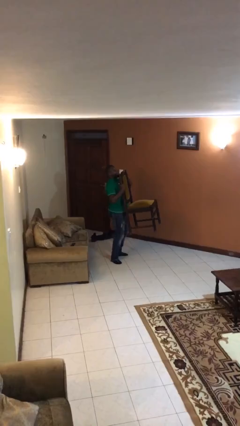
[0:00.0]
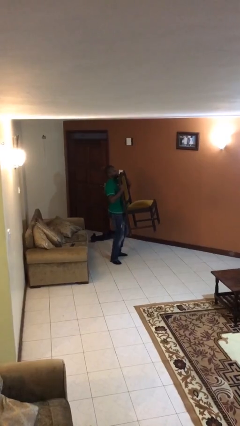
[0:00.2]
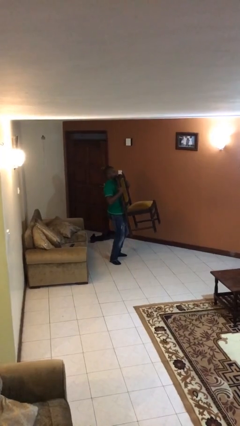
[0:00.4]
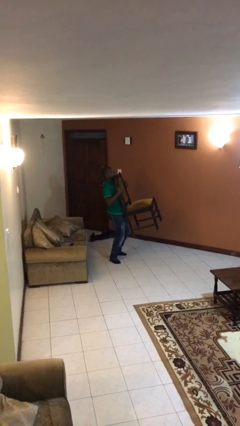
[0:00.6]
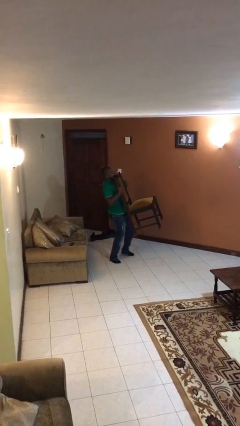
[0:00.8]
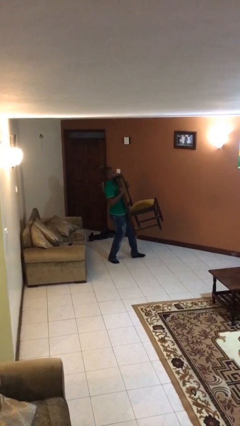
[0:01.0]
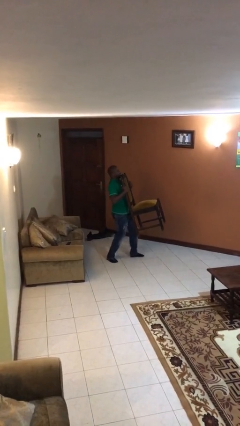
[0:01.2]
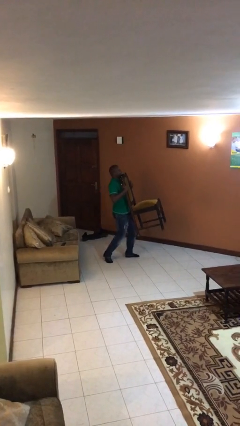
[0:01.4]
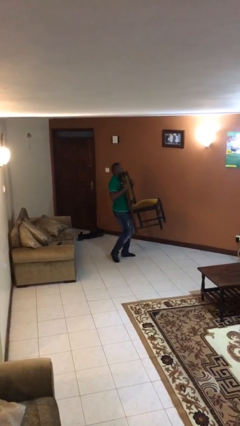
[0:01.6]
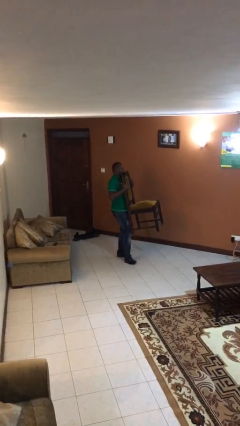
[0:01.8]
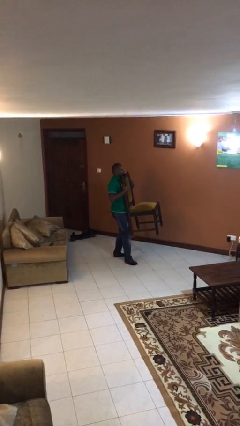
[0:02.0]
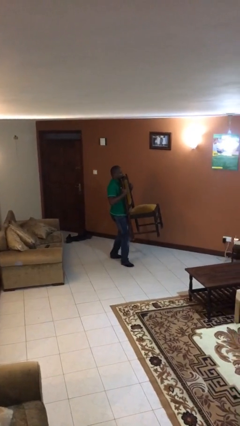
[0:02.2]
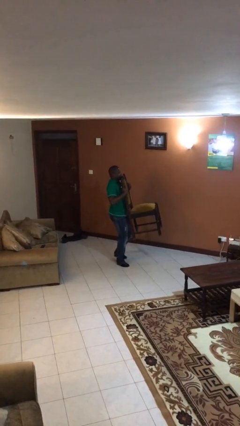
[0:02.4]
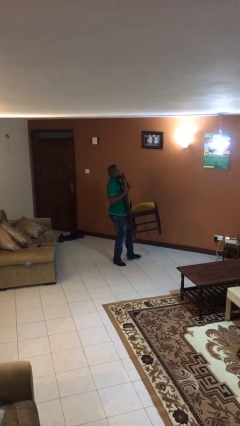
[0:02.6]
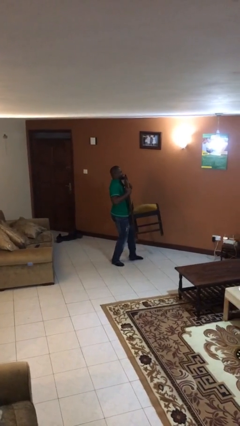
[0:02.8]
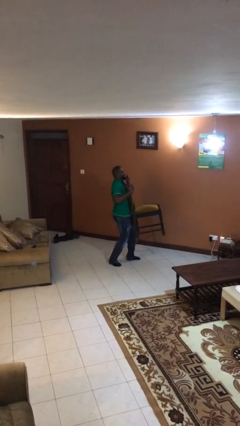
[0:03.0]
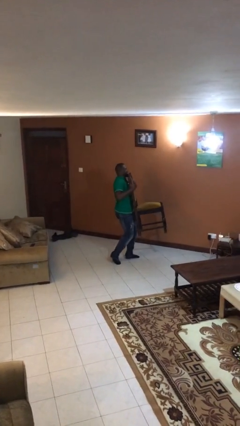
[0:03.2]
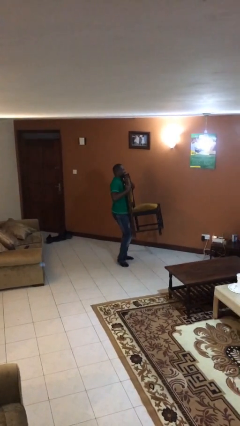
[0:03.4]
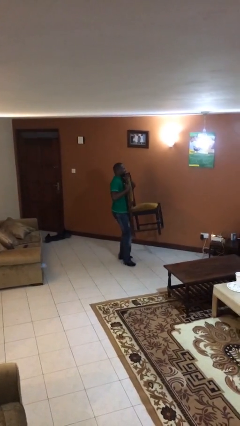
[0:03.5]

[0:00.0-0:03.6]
person carries heavy object

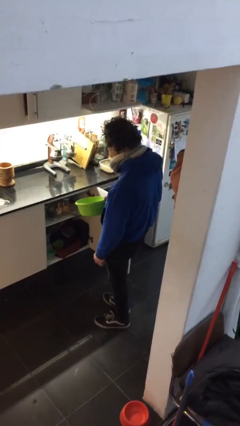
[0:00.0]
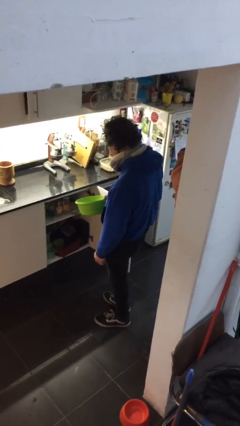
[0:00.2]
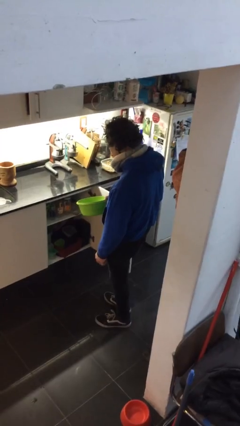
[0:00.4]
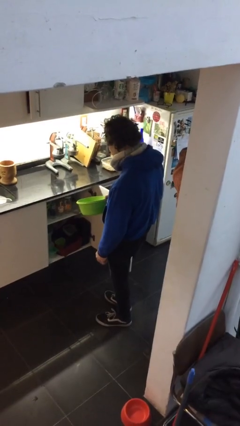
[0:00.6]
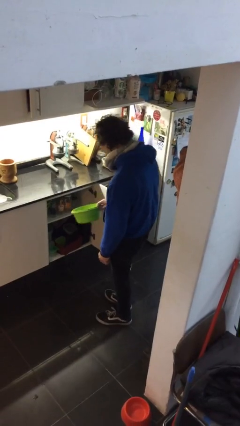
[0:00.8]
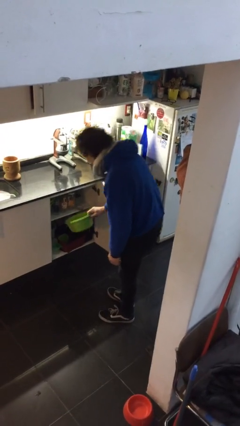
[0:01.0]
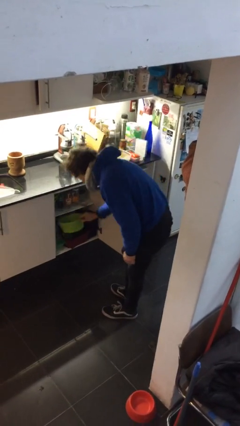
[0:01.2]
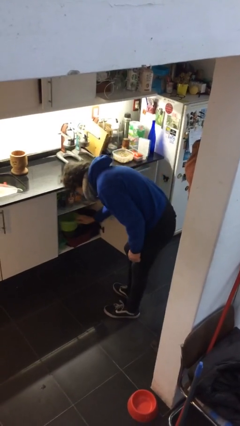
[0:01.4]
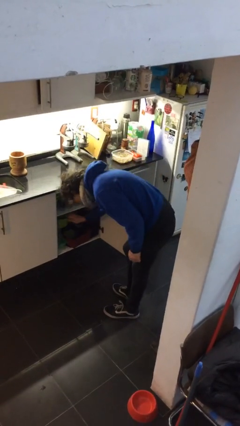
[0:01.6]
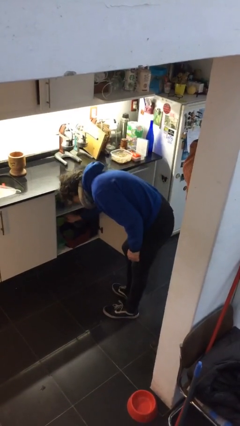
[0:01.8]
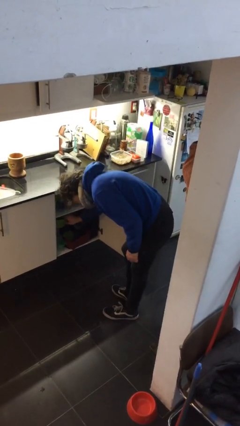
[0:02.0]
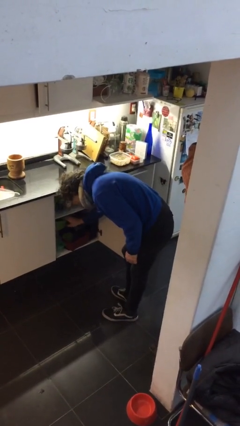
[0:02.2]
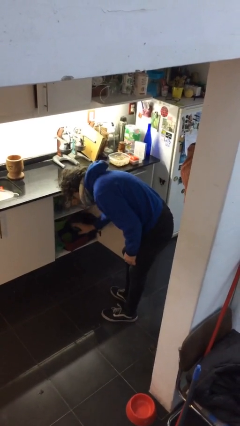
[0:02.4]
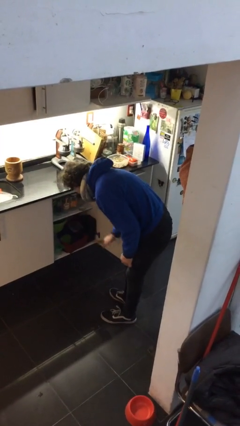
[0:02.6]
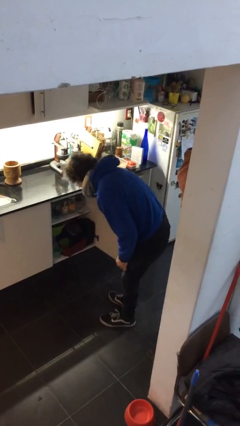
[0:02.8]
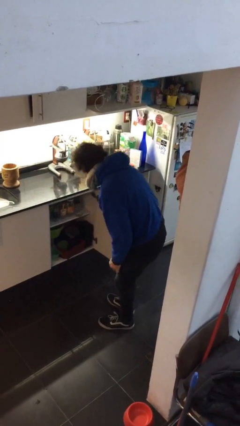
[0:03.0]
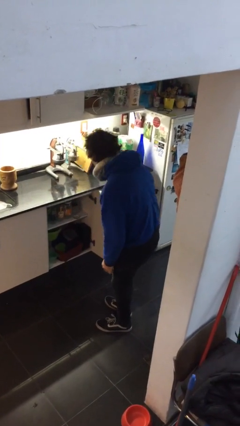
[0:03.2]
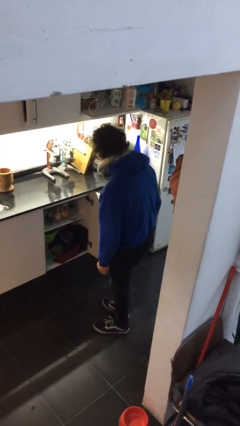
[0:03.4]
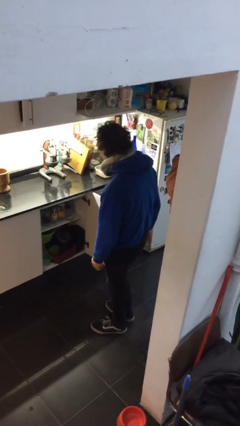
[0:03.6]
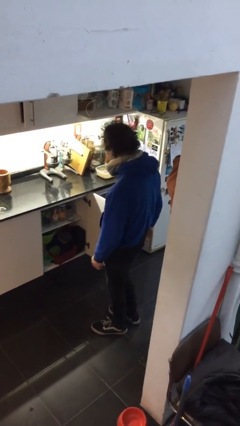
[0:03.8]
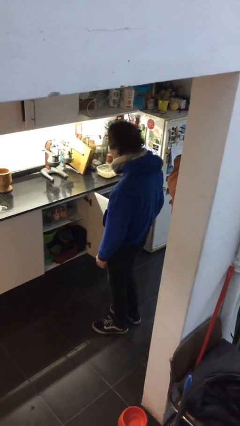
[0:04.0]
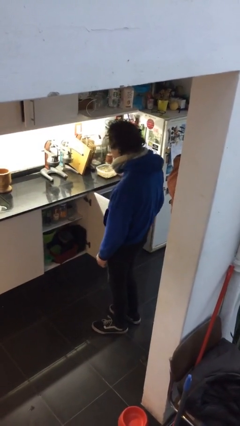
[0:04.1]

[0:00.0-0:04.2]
person puts down object into cabinet

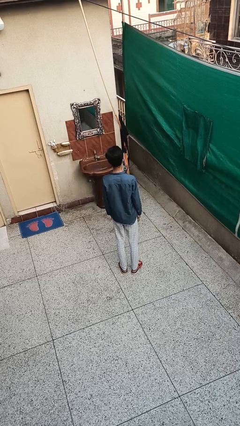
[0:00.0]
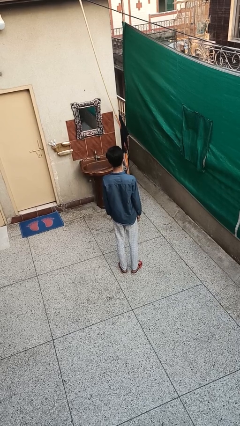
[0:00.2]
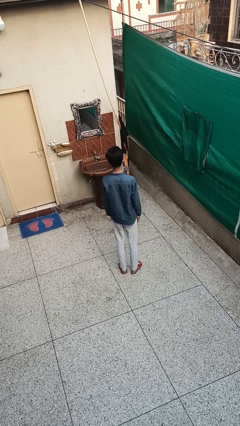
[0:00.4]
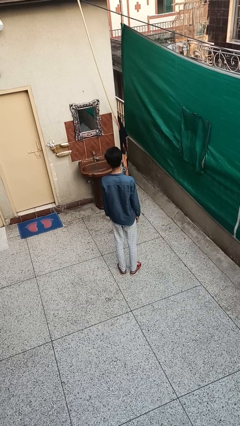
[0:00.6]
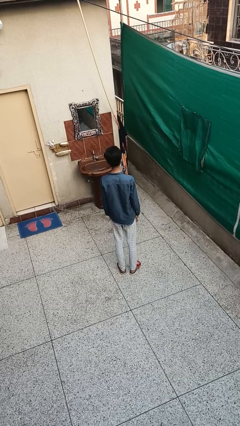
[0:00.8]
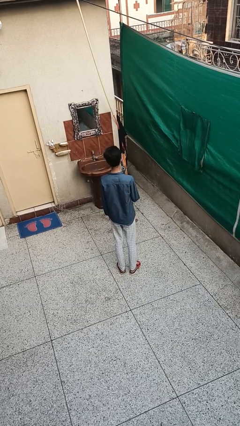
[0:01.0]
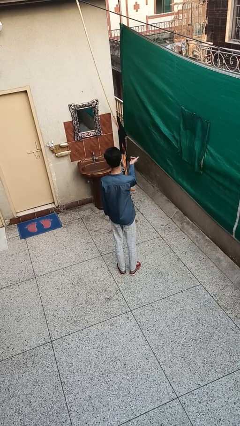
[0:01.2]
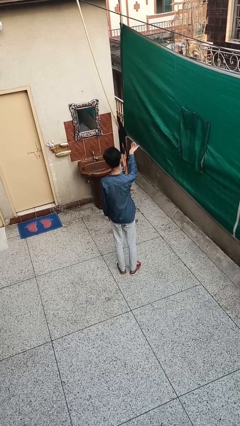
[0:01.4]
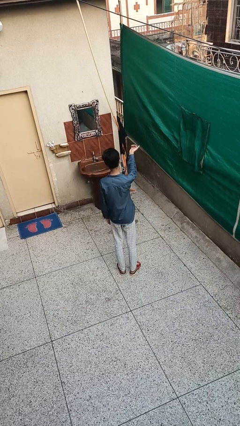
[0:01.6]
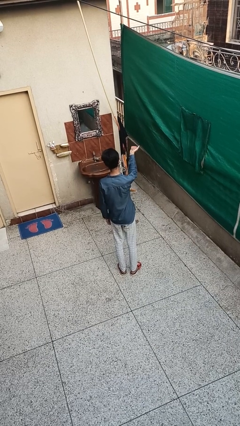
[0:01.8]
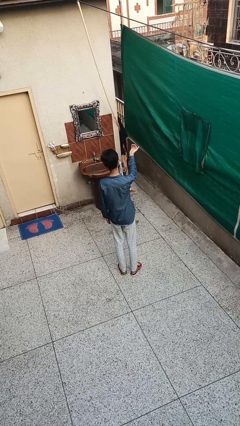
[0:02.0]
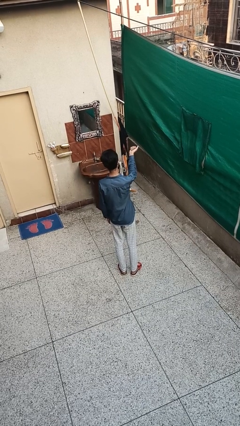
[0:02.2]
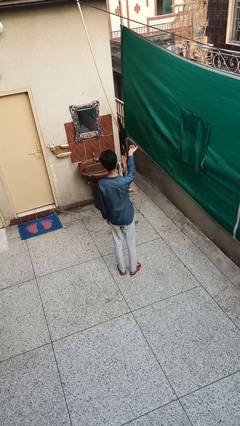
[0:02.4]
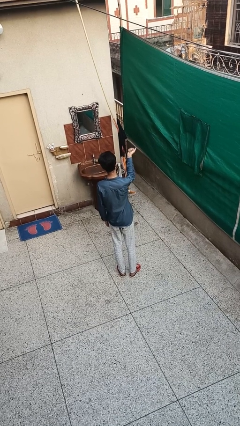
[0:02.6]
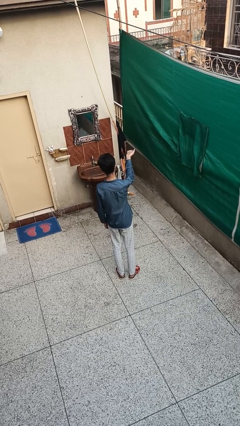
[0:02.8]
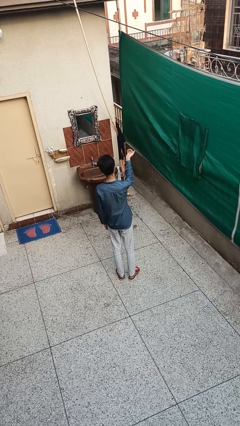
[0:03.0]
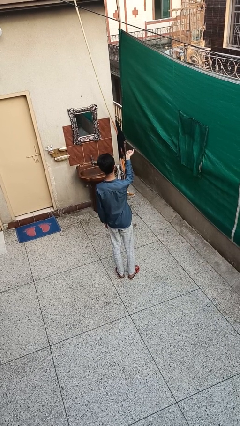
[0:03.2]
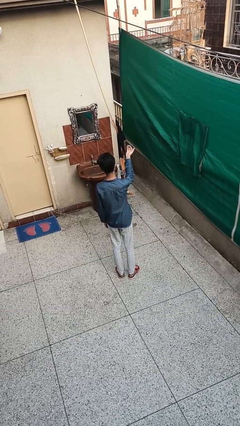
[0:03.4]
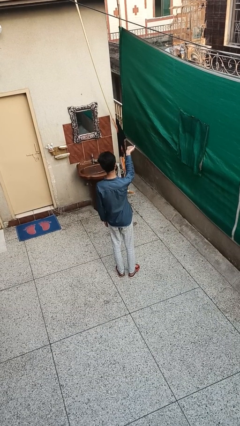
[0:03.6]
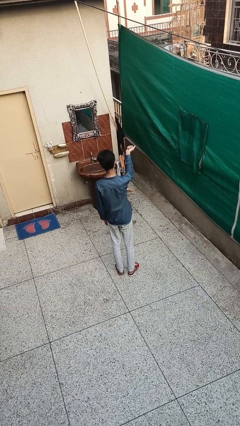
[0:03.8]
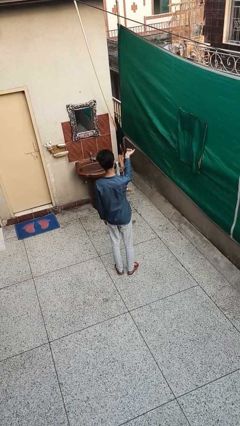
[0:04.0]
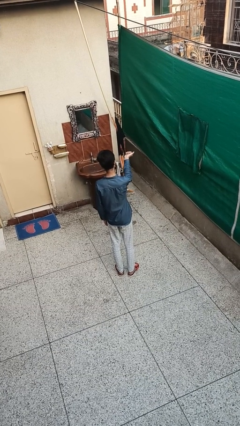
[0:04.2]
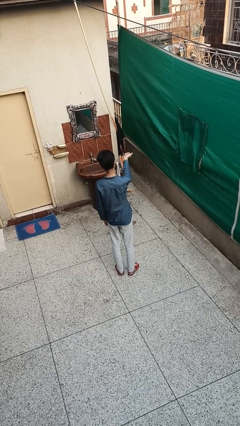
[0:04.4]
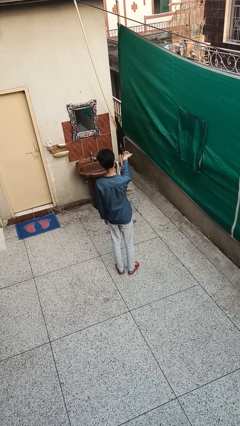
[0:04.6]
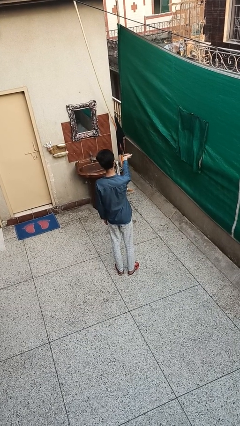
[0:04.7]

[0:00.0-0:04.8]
person gestures come here

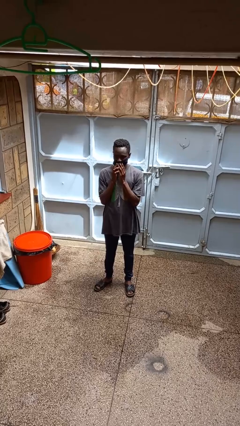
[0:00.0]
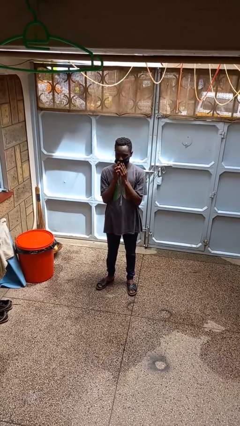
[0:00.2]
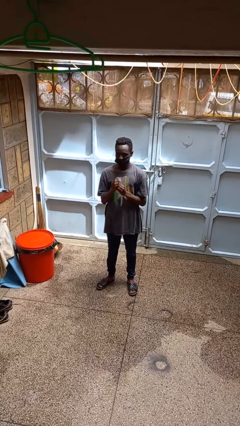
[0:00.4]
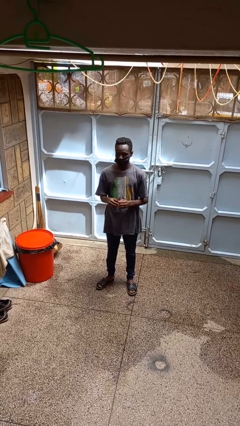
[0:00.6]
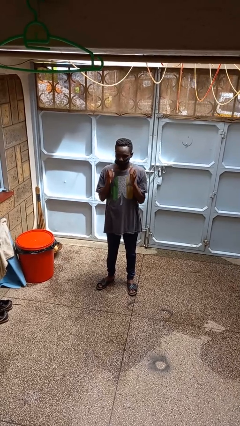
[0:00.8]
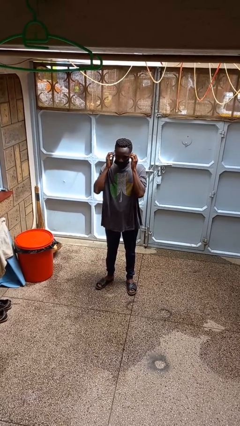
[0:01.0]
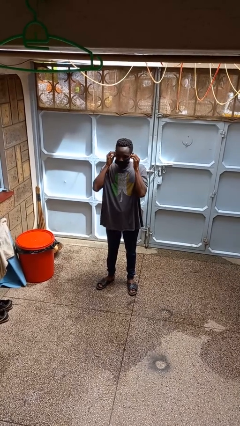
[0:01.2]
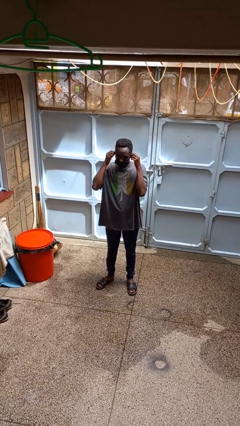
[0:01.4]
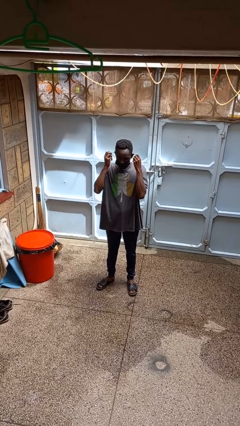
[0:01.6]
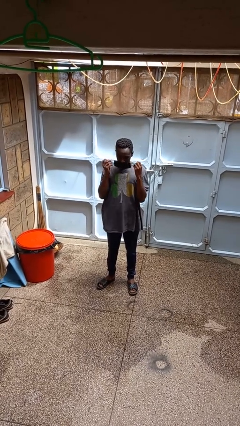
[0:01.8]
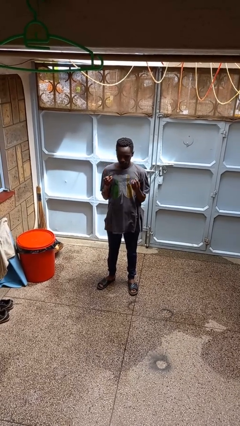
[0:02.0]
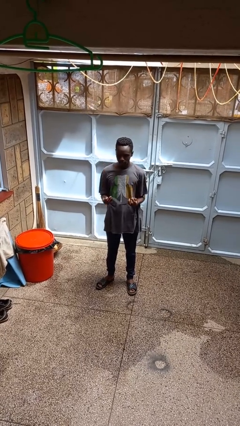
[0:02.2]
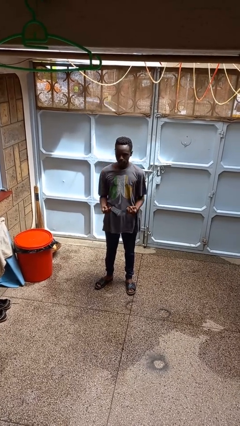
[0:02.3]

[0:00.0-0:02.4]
person takes off facemask

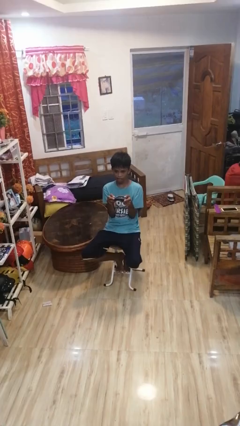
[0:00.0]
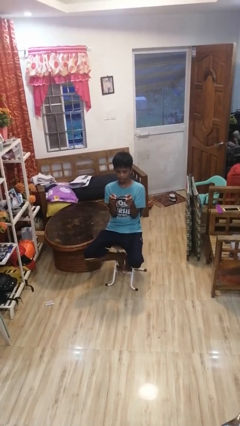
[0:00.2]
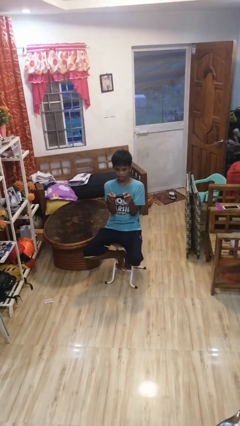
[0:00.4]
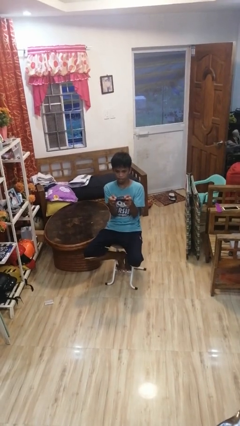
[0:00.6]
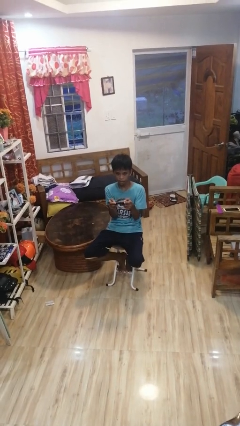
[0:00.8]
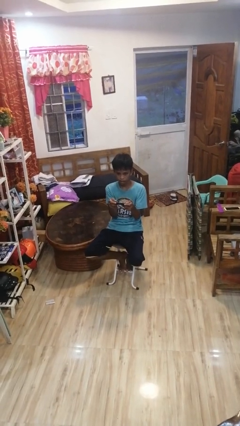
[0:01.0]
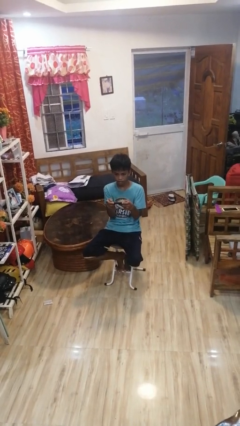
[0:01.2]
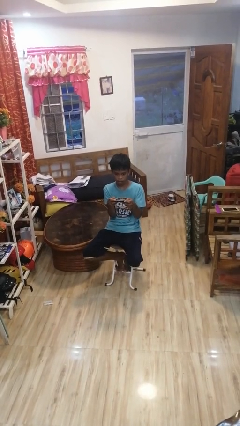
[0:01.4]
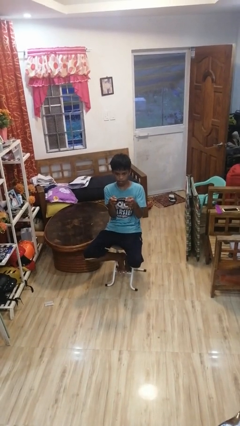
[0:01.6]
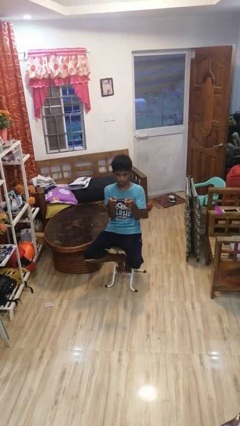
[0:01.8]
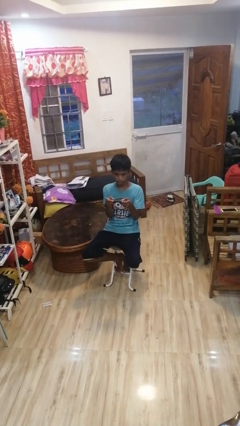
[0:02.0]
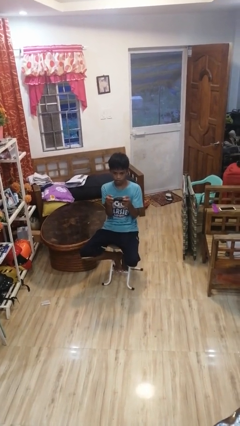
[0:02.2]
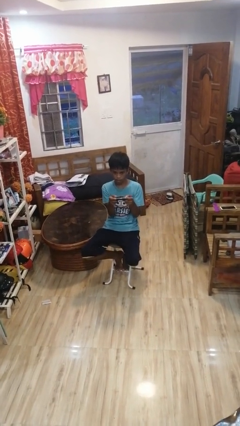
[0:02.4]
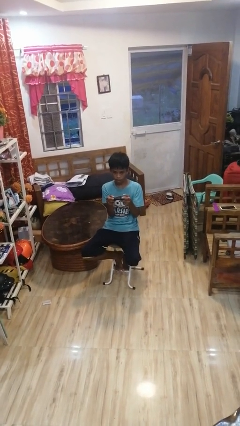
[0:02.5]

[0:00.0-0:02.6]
person interacts with handheld game
